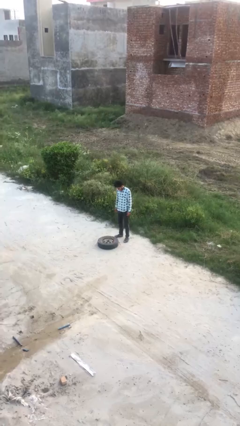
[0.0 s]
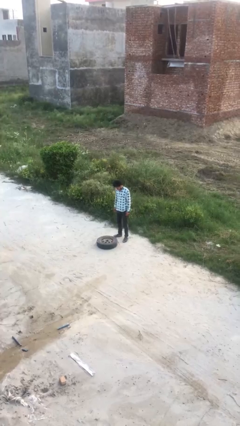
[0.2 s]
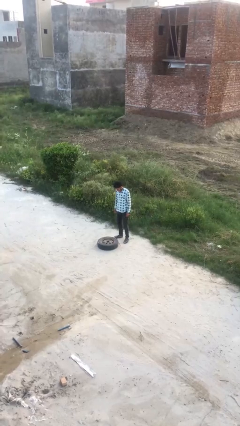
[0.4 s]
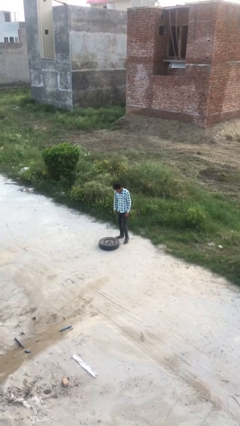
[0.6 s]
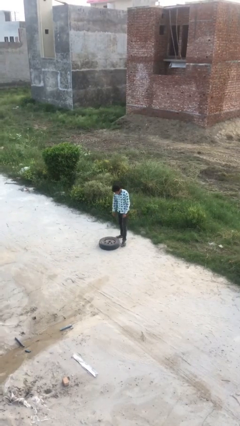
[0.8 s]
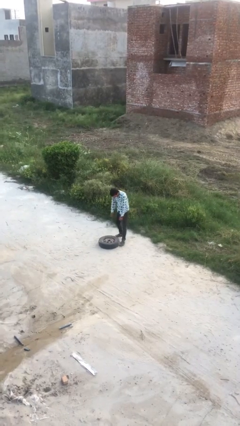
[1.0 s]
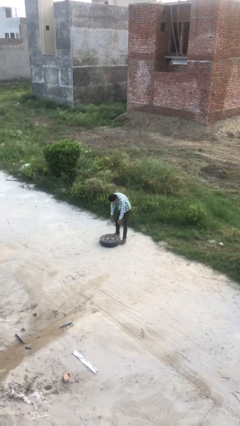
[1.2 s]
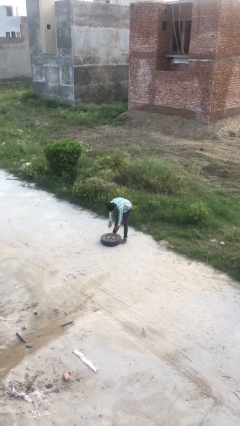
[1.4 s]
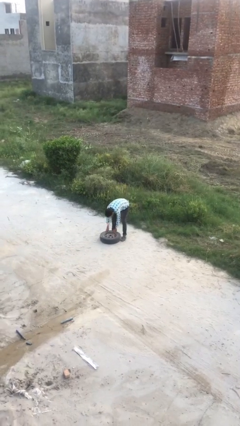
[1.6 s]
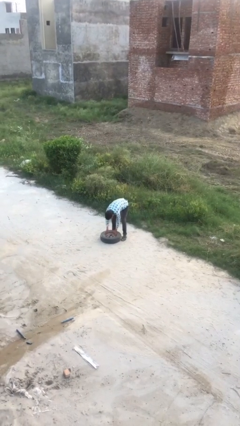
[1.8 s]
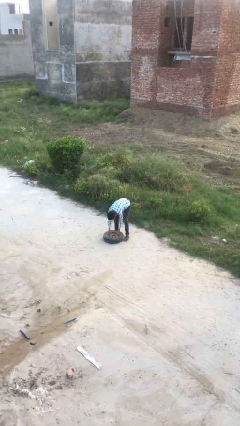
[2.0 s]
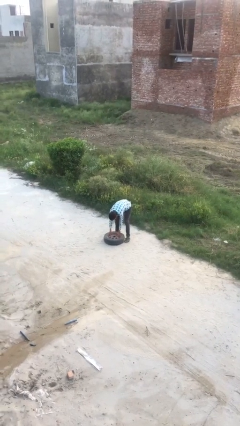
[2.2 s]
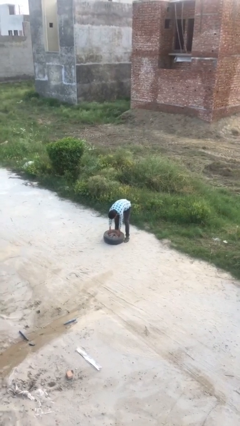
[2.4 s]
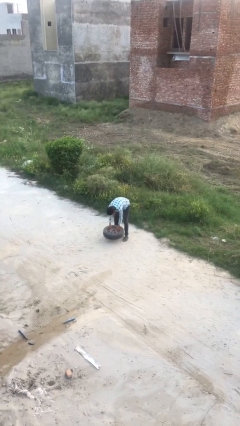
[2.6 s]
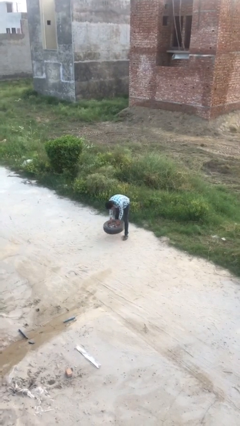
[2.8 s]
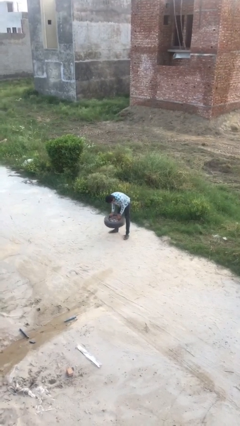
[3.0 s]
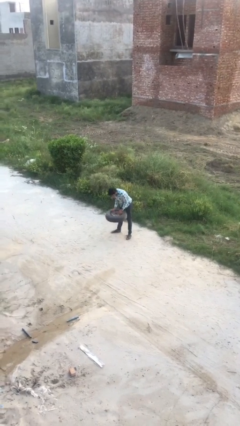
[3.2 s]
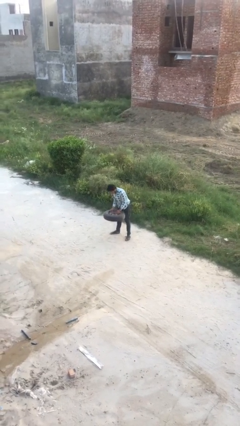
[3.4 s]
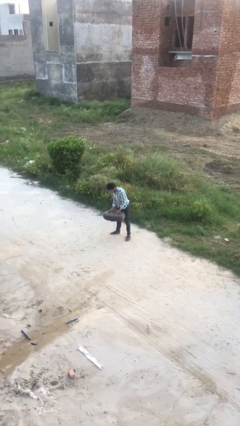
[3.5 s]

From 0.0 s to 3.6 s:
person picks up object from floor

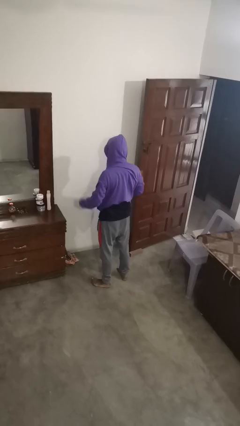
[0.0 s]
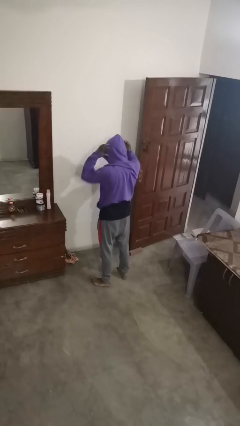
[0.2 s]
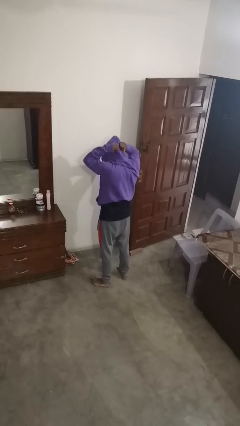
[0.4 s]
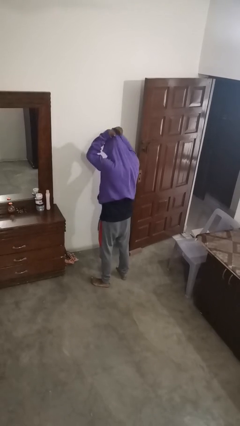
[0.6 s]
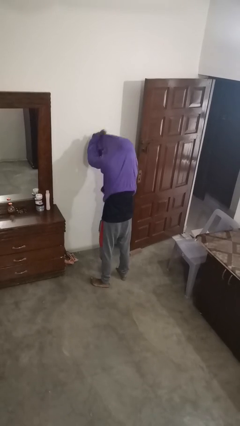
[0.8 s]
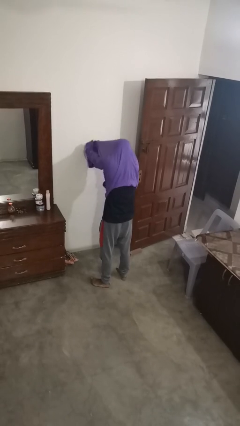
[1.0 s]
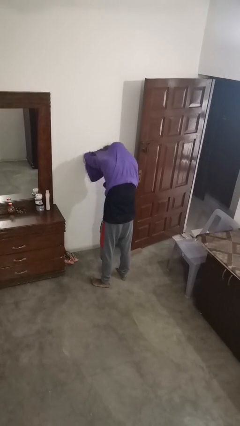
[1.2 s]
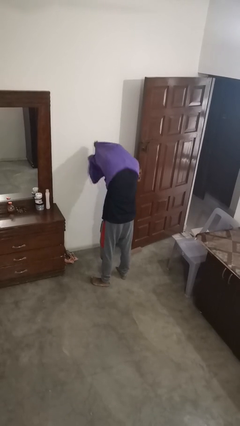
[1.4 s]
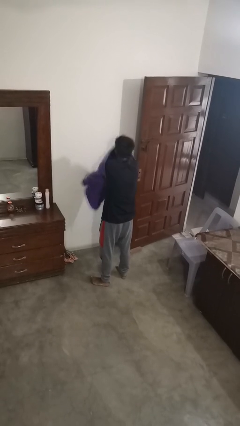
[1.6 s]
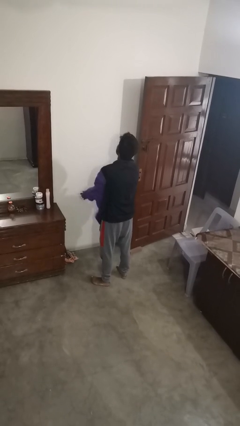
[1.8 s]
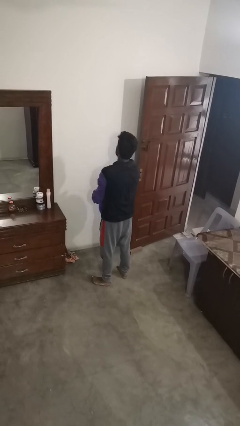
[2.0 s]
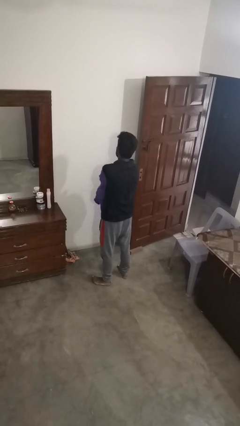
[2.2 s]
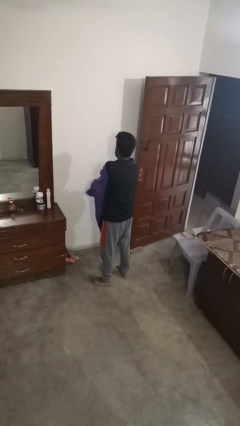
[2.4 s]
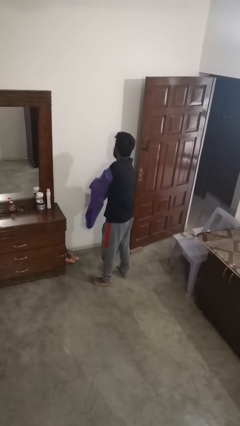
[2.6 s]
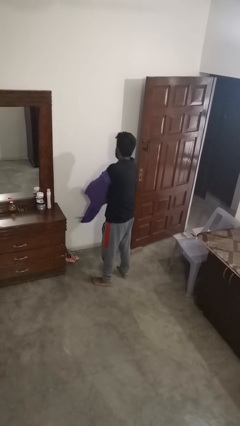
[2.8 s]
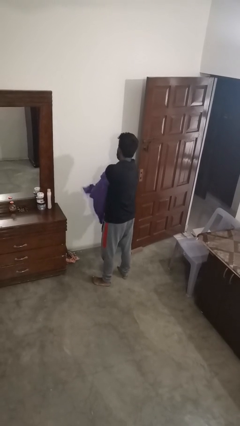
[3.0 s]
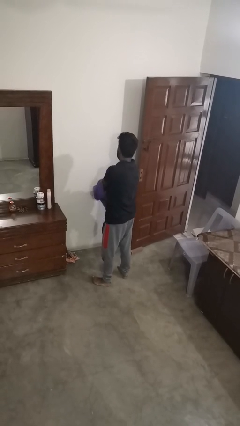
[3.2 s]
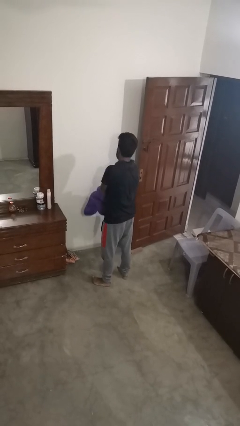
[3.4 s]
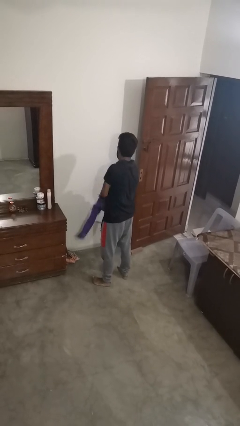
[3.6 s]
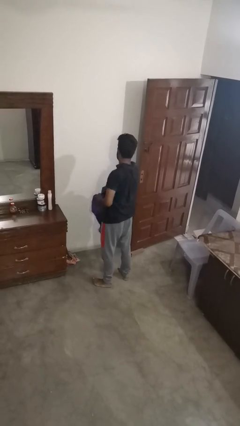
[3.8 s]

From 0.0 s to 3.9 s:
person takes off hoodie

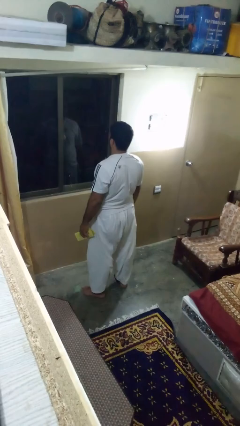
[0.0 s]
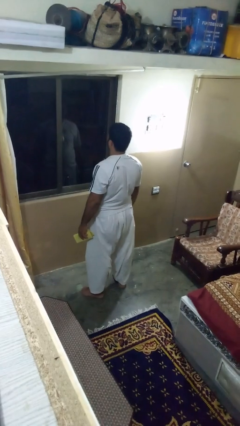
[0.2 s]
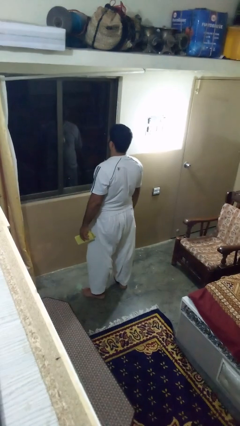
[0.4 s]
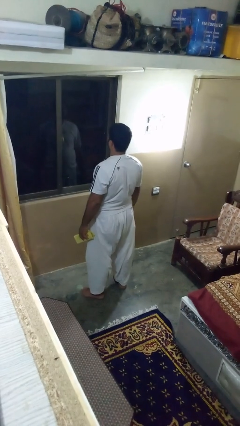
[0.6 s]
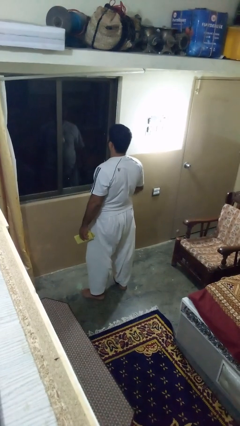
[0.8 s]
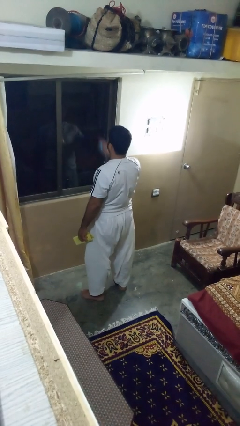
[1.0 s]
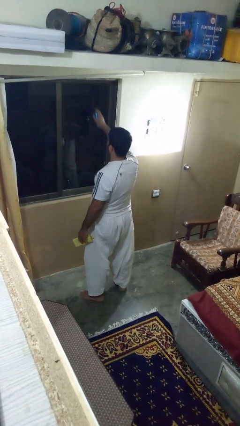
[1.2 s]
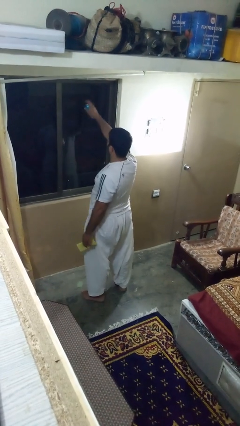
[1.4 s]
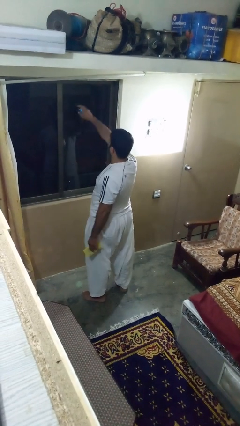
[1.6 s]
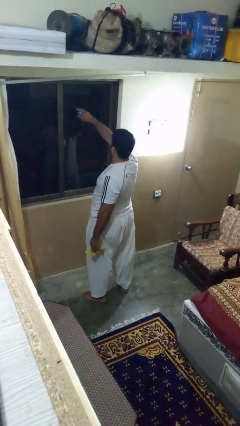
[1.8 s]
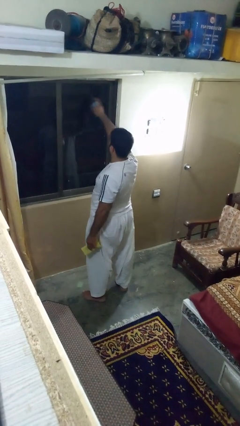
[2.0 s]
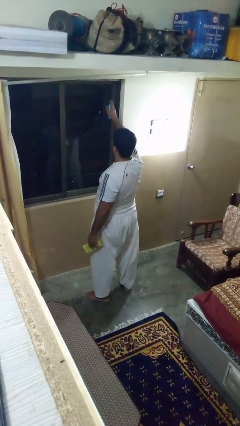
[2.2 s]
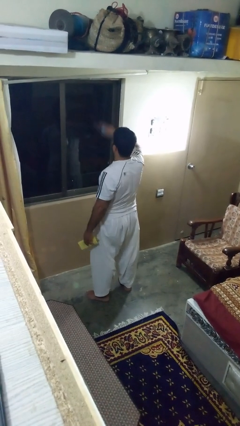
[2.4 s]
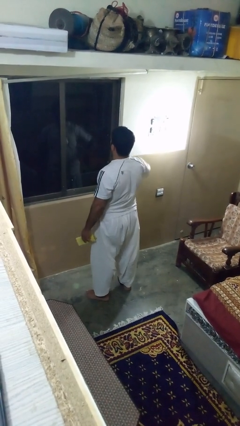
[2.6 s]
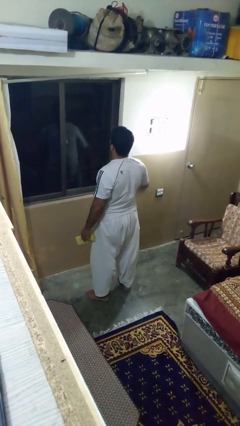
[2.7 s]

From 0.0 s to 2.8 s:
person sprays from bottle

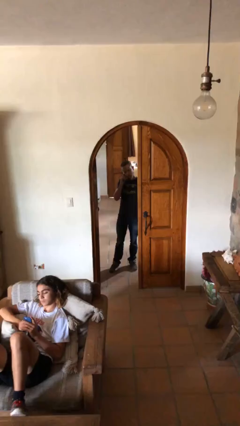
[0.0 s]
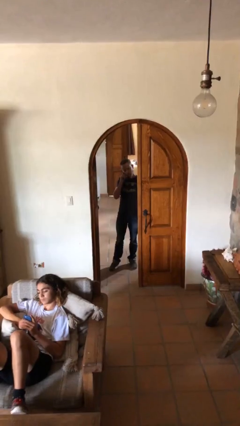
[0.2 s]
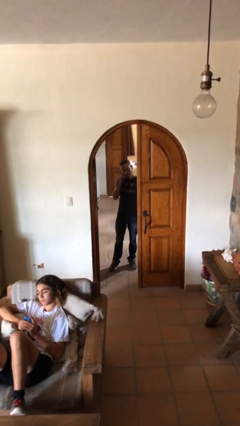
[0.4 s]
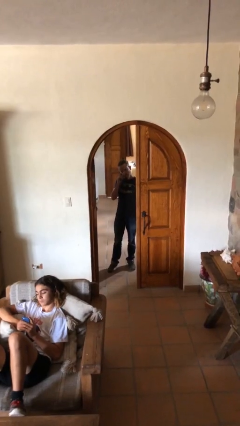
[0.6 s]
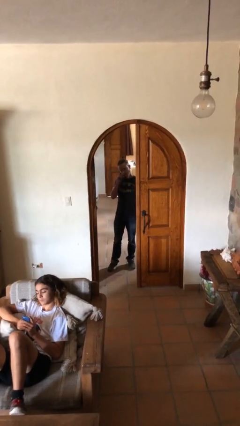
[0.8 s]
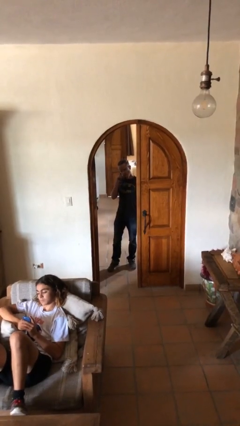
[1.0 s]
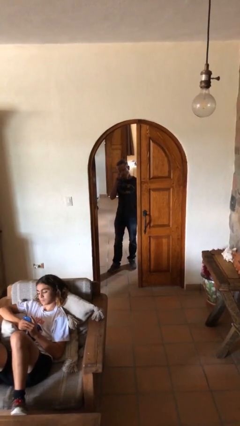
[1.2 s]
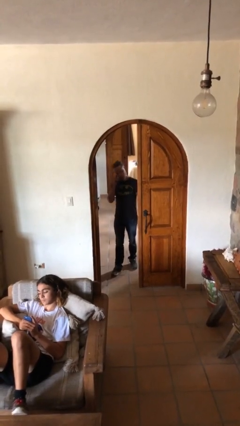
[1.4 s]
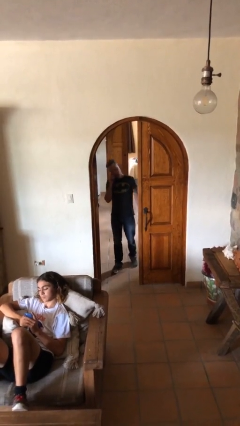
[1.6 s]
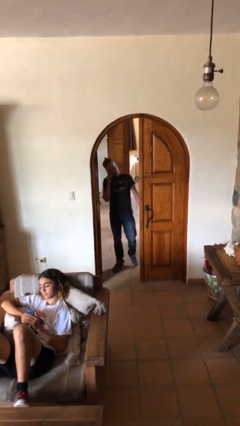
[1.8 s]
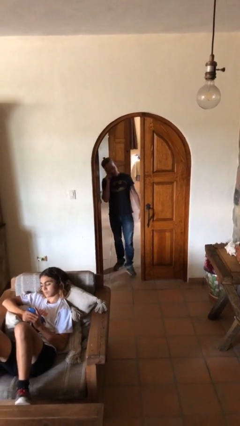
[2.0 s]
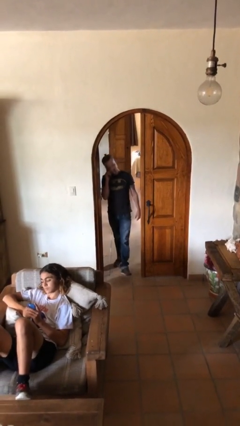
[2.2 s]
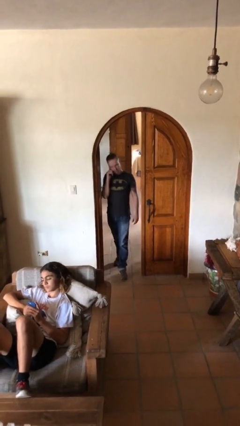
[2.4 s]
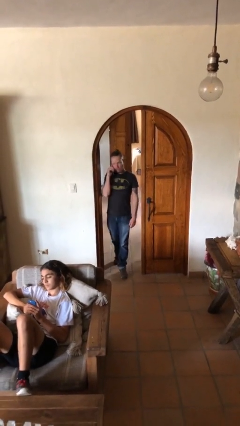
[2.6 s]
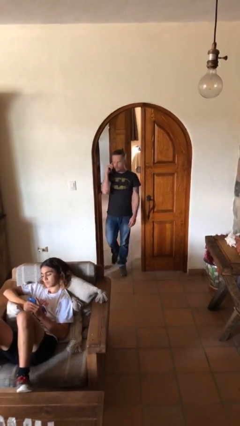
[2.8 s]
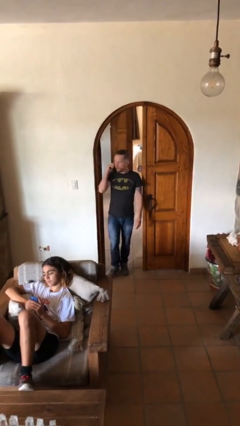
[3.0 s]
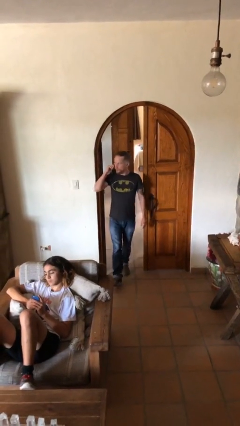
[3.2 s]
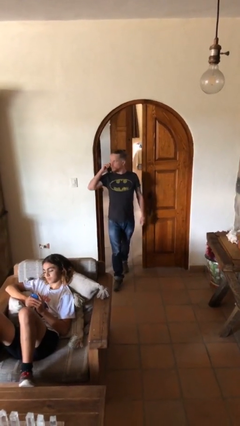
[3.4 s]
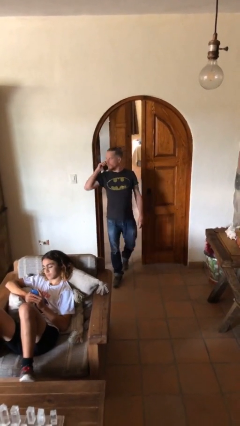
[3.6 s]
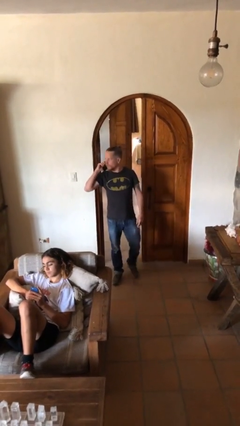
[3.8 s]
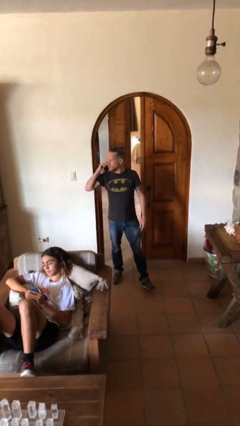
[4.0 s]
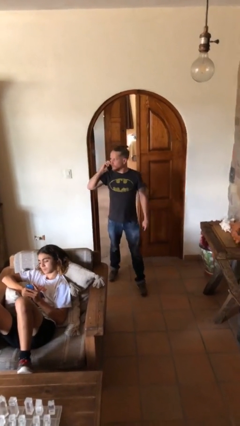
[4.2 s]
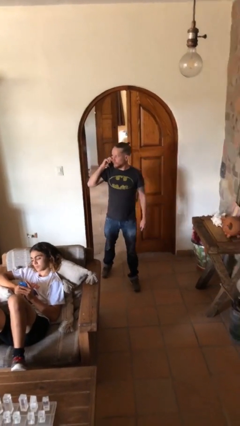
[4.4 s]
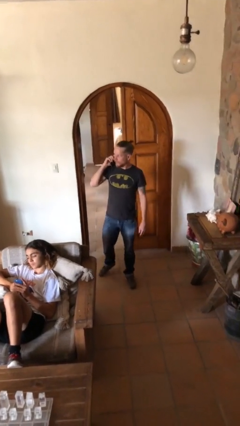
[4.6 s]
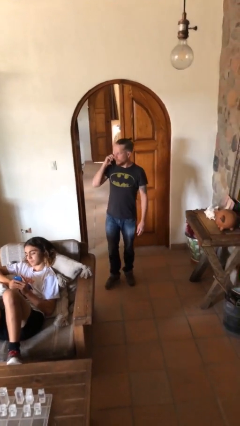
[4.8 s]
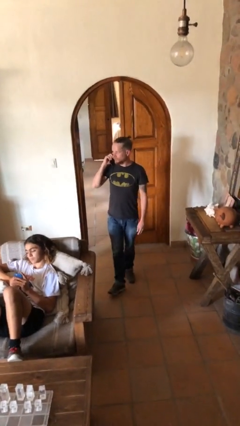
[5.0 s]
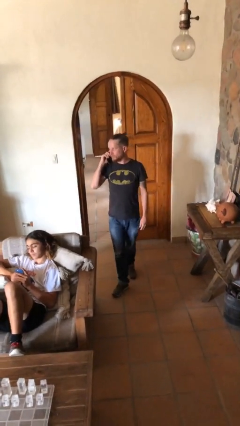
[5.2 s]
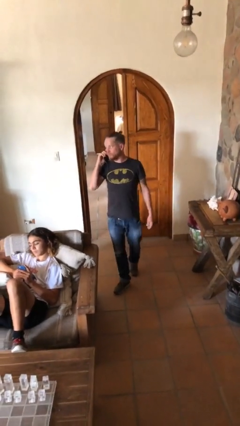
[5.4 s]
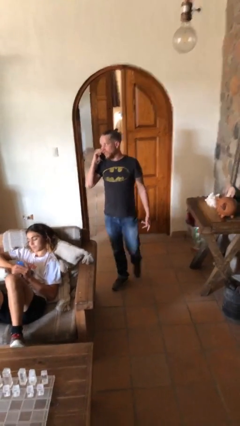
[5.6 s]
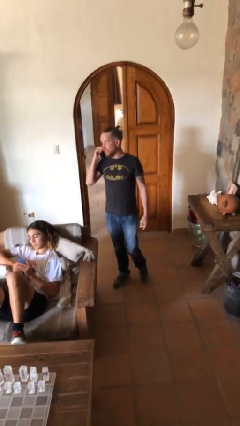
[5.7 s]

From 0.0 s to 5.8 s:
person enters scene through structure

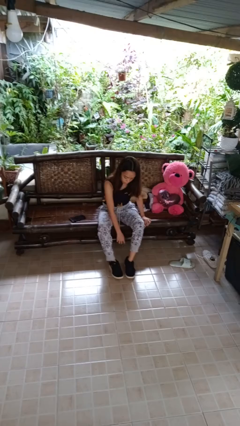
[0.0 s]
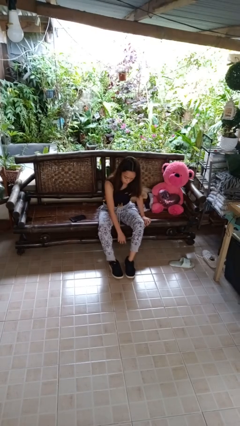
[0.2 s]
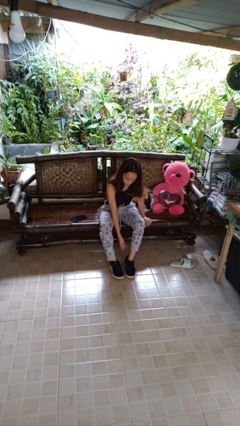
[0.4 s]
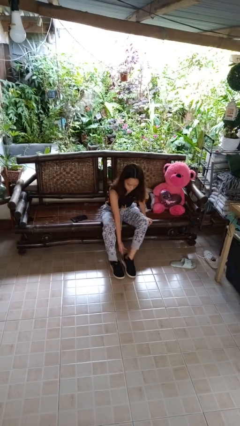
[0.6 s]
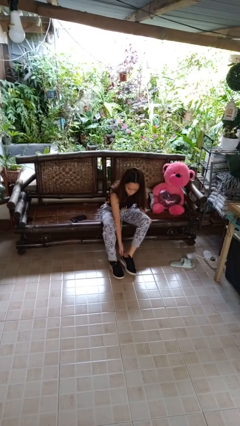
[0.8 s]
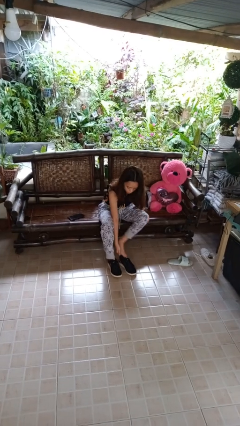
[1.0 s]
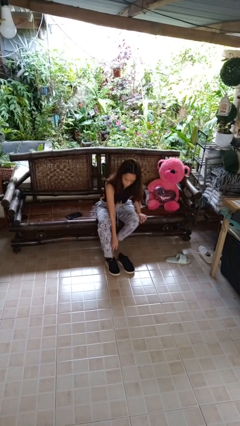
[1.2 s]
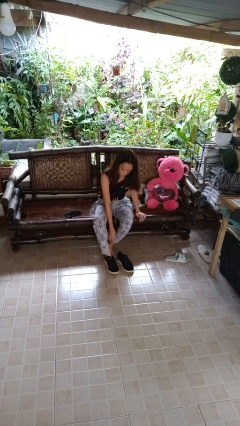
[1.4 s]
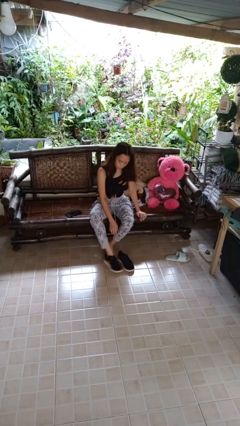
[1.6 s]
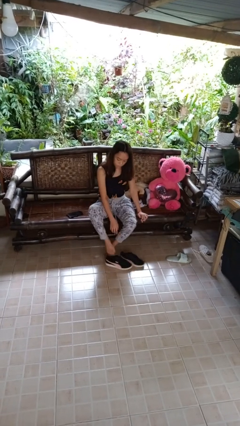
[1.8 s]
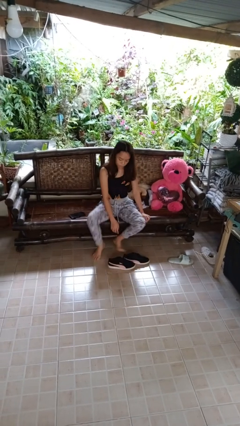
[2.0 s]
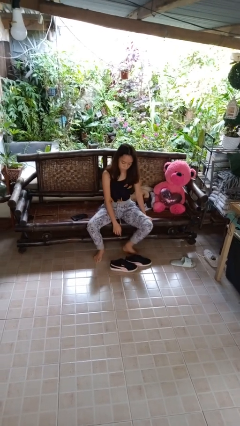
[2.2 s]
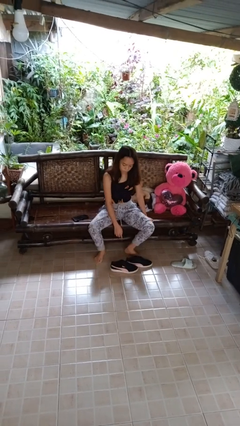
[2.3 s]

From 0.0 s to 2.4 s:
person takes off shoes
